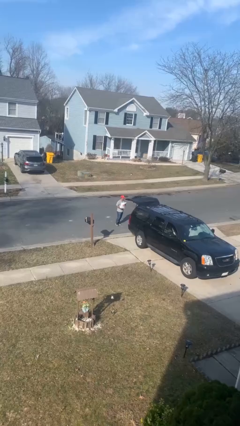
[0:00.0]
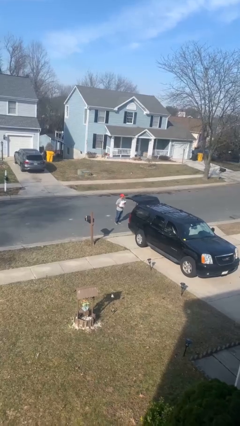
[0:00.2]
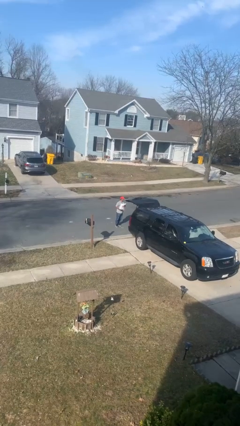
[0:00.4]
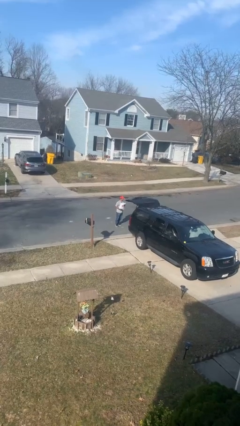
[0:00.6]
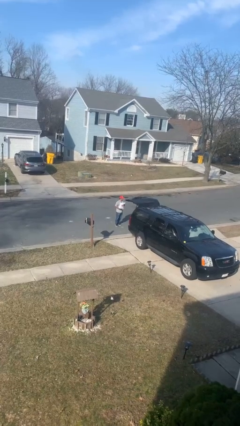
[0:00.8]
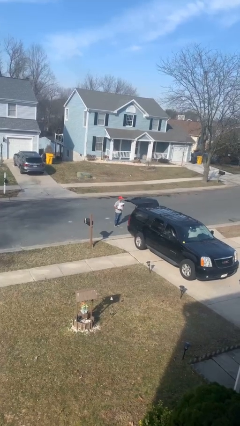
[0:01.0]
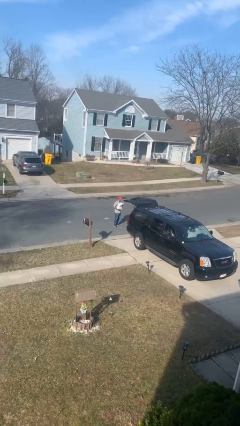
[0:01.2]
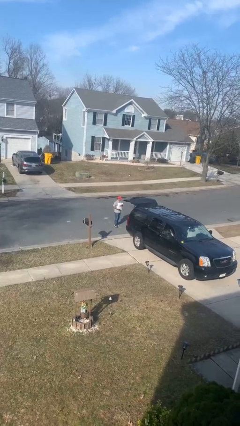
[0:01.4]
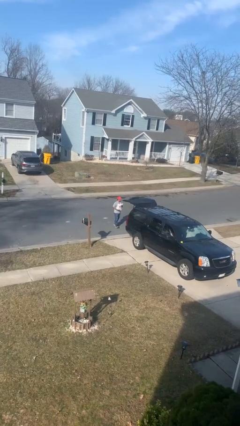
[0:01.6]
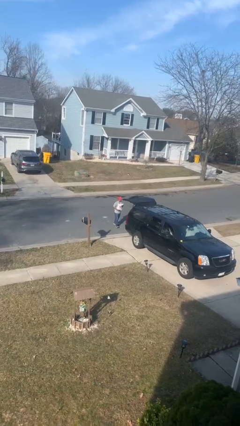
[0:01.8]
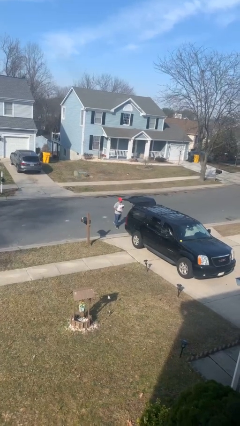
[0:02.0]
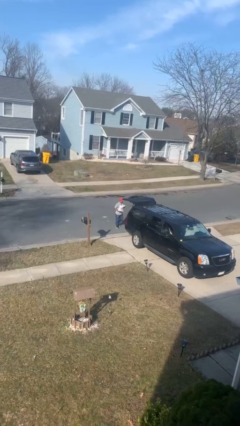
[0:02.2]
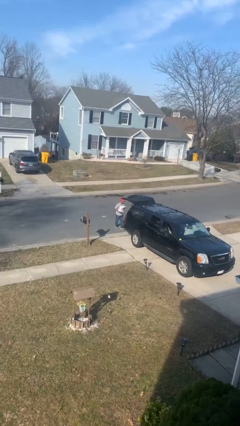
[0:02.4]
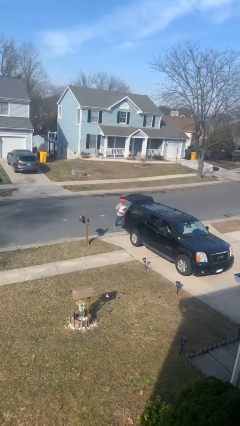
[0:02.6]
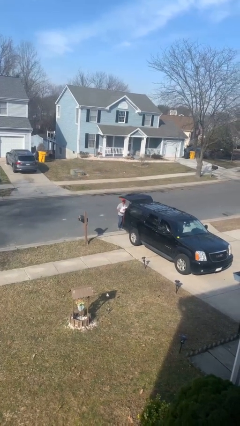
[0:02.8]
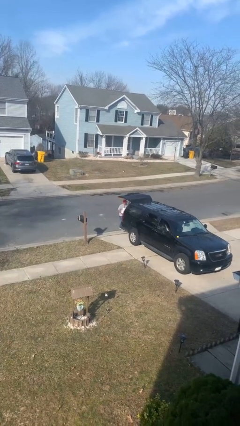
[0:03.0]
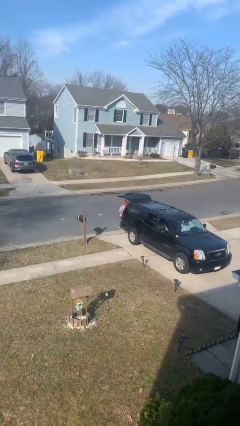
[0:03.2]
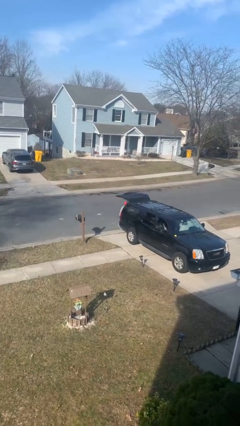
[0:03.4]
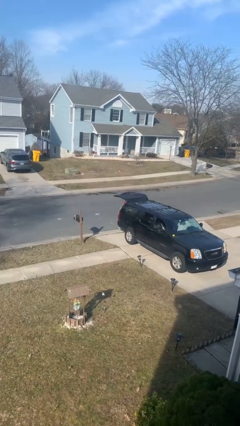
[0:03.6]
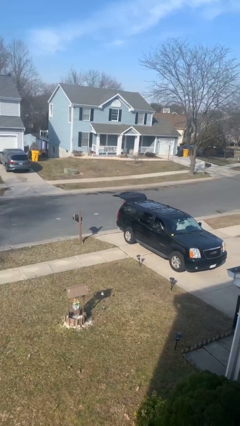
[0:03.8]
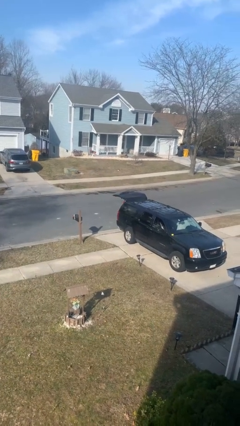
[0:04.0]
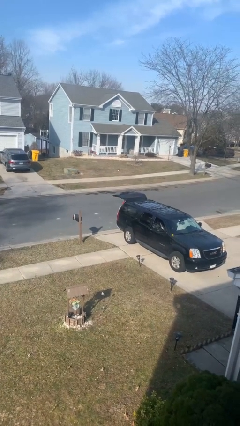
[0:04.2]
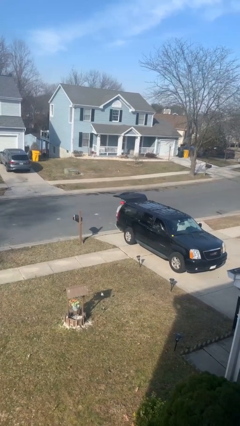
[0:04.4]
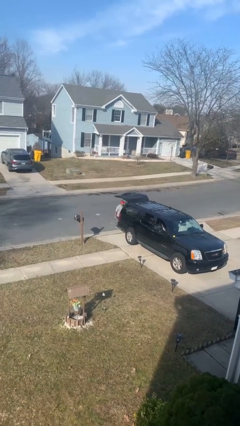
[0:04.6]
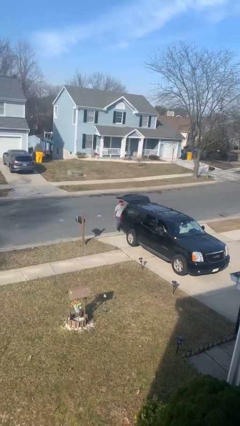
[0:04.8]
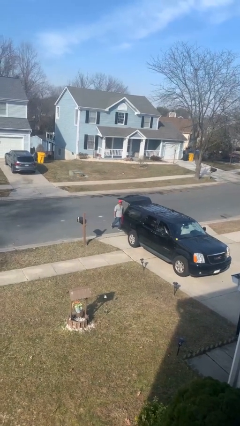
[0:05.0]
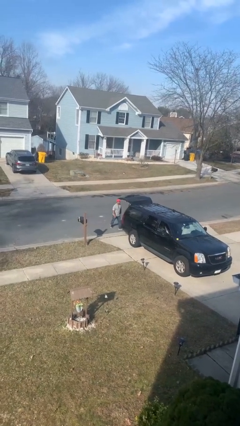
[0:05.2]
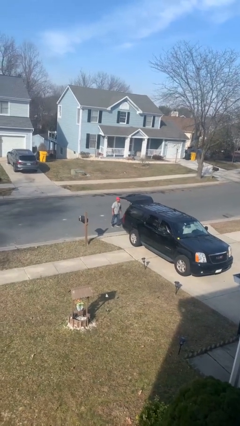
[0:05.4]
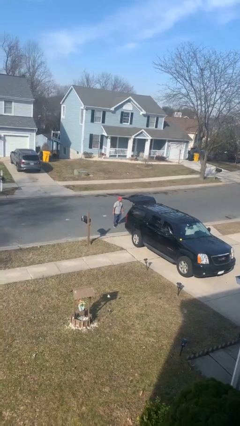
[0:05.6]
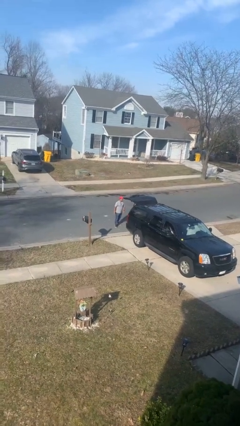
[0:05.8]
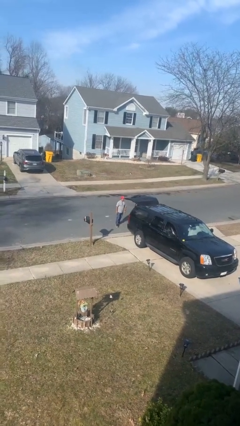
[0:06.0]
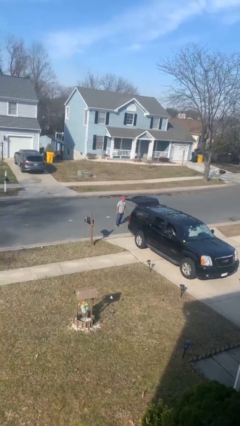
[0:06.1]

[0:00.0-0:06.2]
person loads car

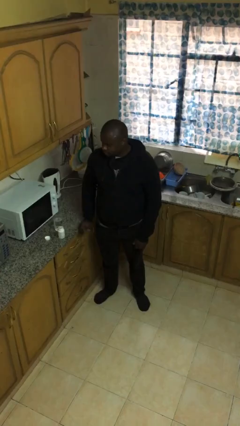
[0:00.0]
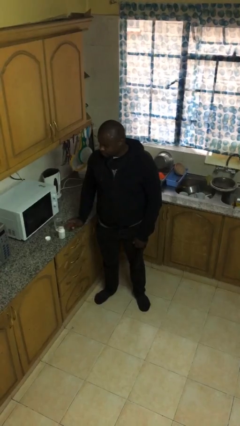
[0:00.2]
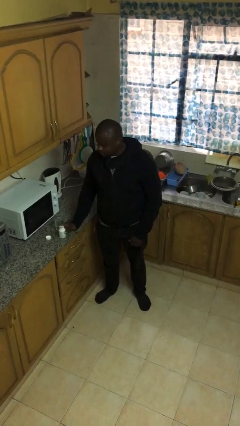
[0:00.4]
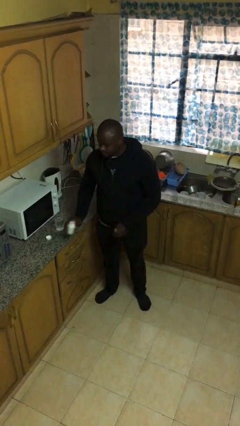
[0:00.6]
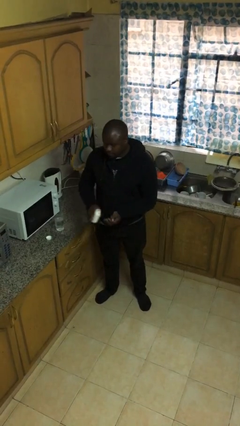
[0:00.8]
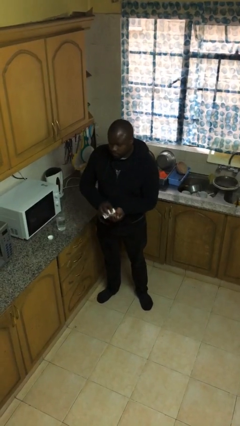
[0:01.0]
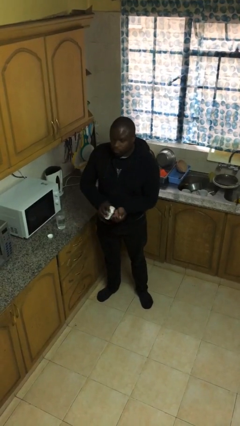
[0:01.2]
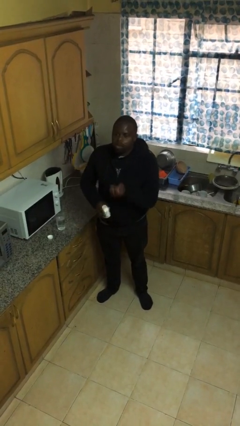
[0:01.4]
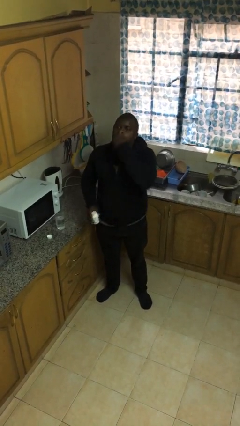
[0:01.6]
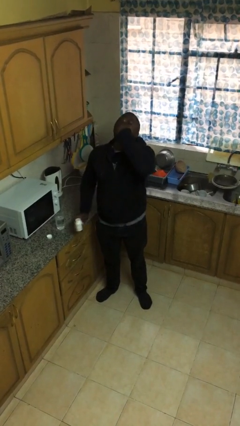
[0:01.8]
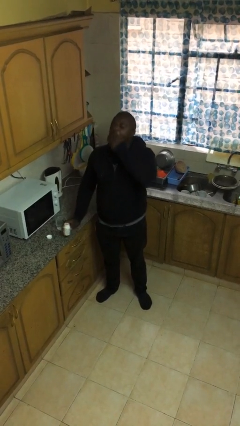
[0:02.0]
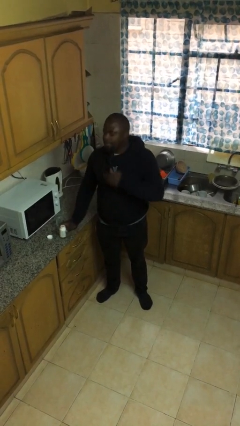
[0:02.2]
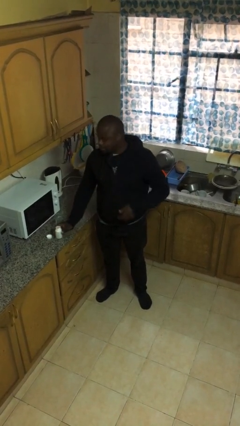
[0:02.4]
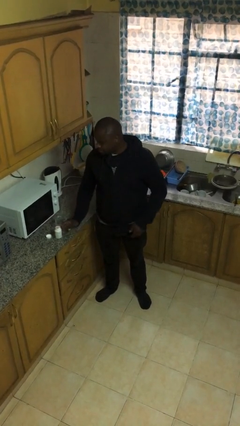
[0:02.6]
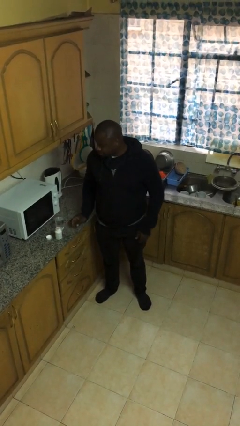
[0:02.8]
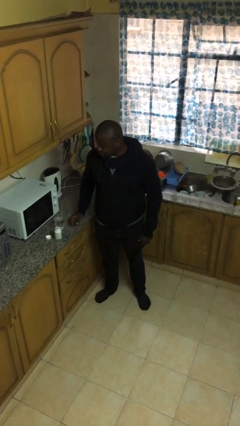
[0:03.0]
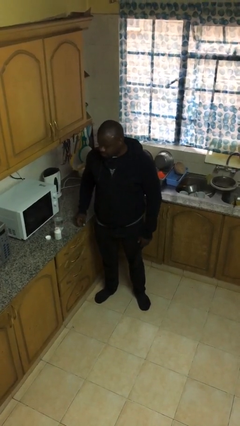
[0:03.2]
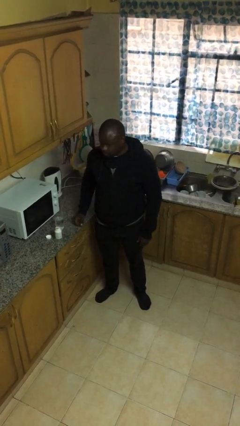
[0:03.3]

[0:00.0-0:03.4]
person takes medicine pills

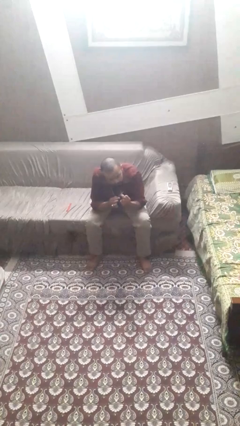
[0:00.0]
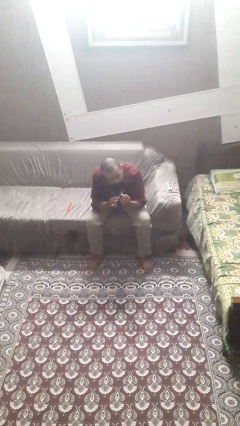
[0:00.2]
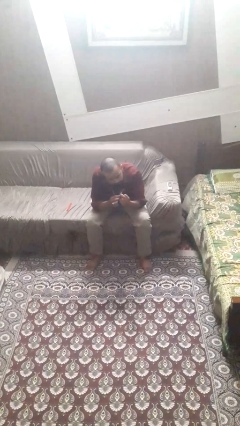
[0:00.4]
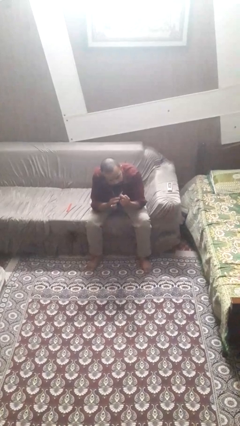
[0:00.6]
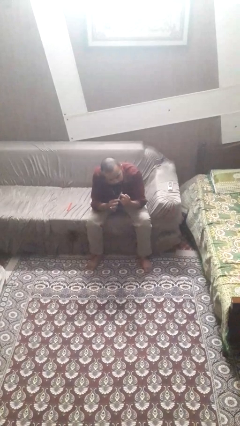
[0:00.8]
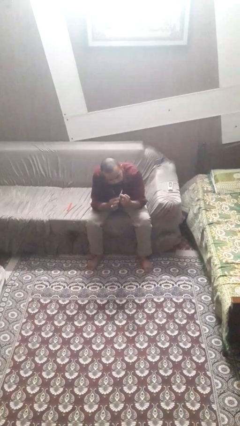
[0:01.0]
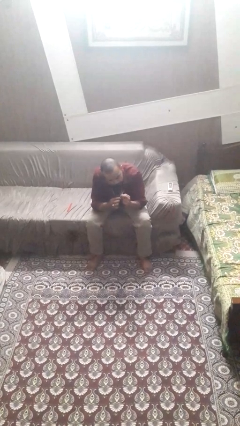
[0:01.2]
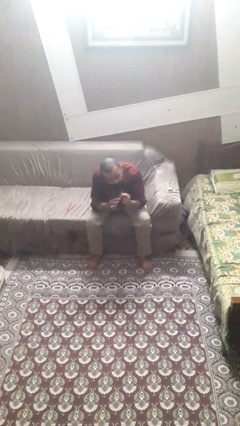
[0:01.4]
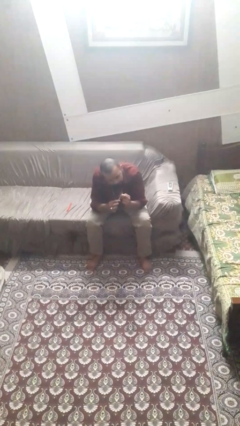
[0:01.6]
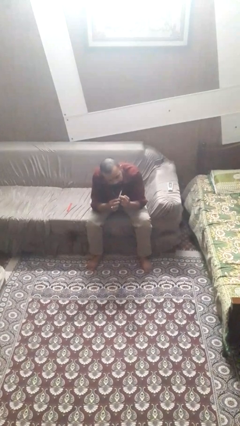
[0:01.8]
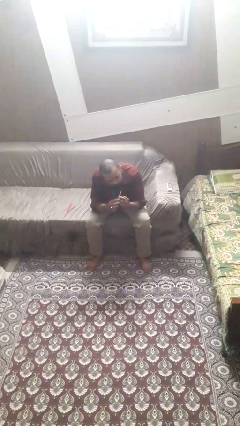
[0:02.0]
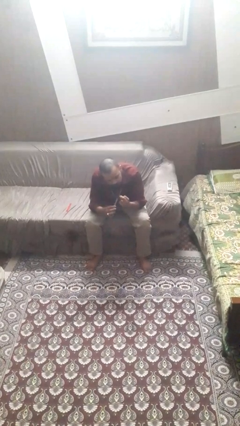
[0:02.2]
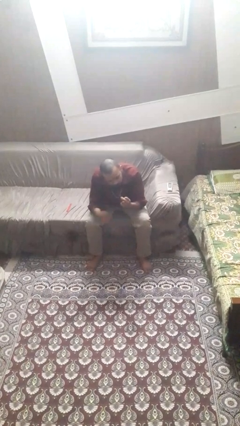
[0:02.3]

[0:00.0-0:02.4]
person files fingernails

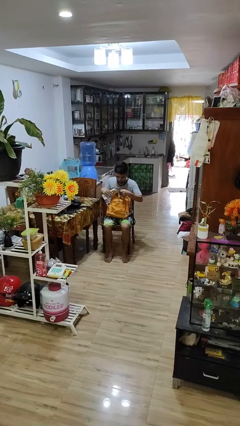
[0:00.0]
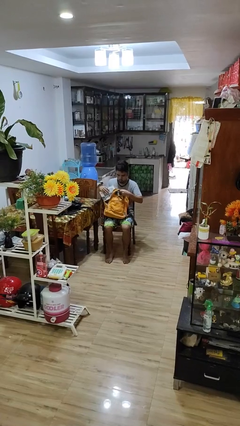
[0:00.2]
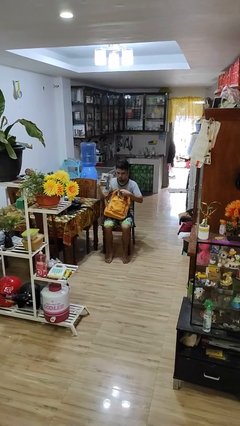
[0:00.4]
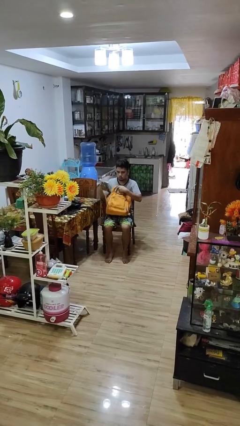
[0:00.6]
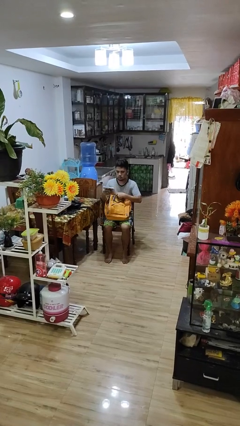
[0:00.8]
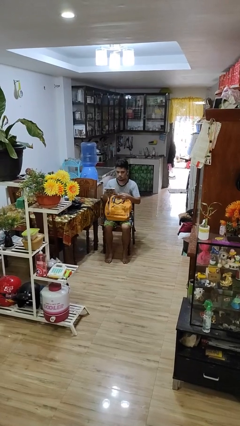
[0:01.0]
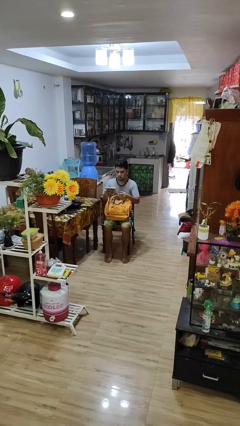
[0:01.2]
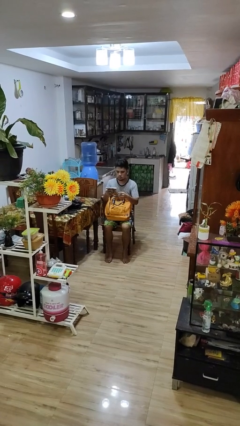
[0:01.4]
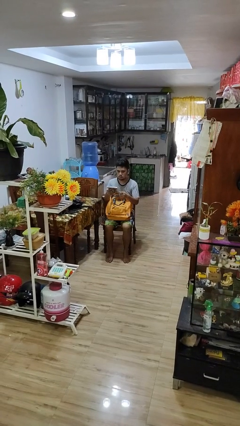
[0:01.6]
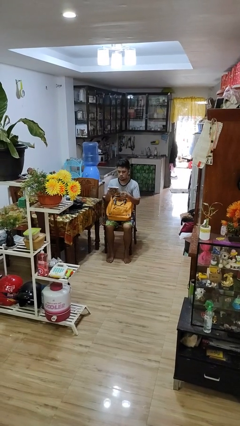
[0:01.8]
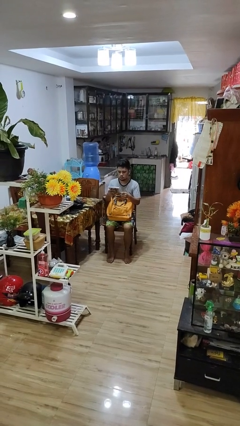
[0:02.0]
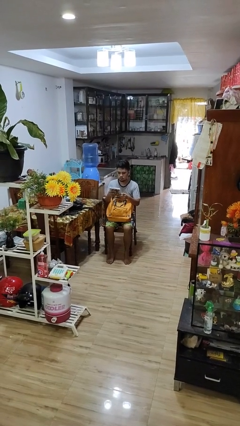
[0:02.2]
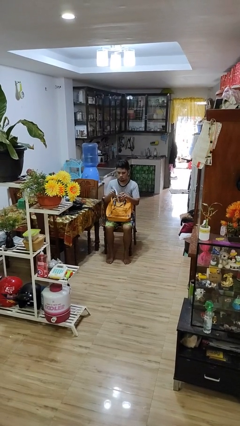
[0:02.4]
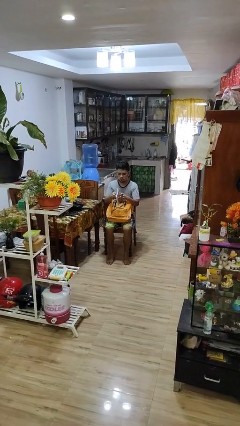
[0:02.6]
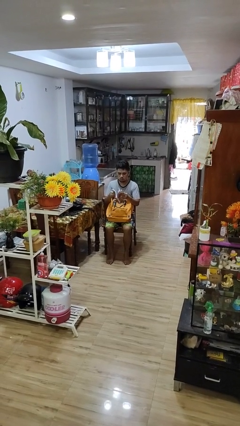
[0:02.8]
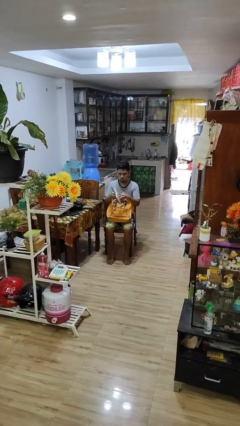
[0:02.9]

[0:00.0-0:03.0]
person takes object from backpack

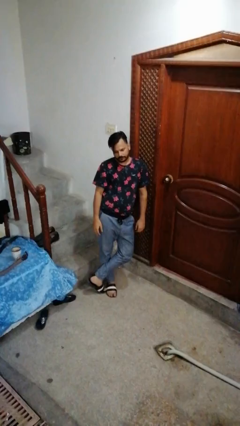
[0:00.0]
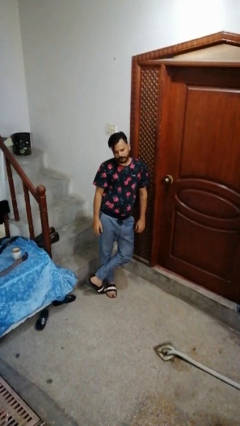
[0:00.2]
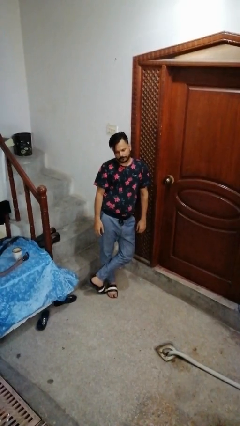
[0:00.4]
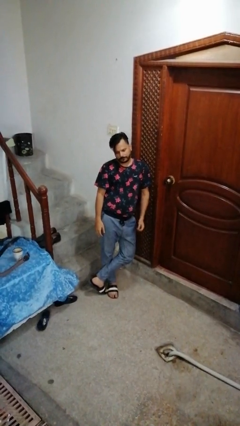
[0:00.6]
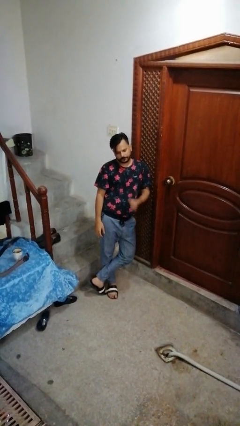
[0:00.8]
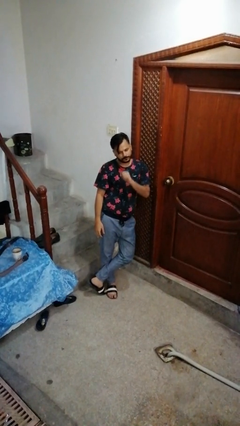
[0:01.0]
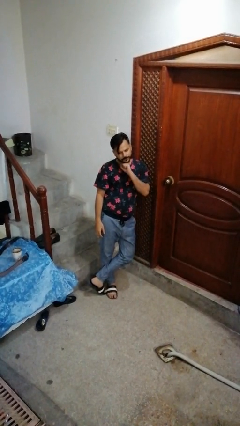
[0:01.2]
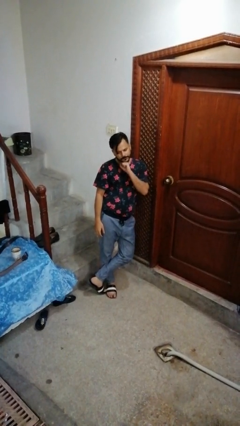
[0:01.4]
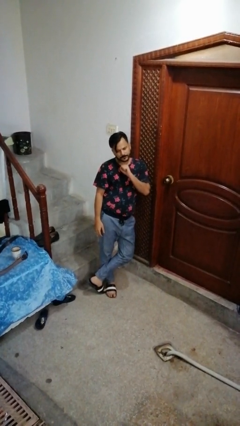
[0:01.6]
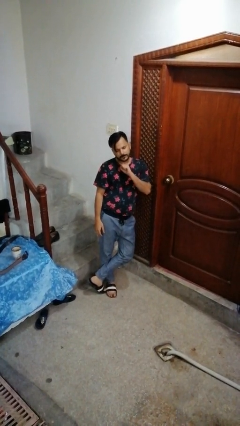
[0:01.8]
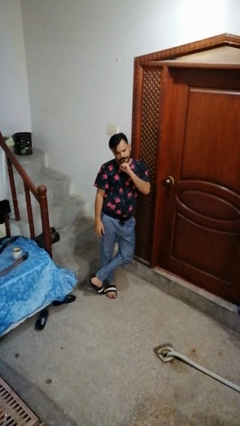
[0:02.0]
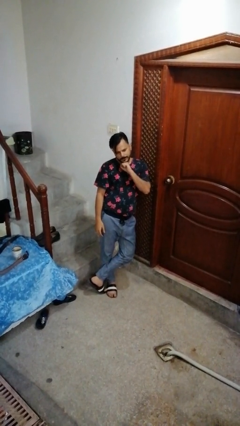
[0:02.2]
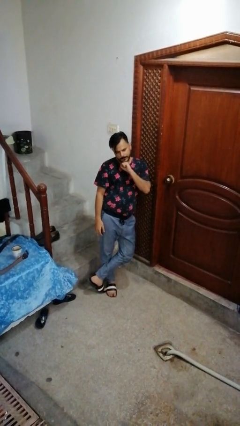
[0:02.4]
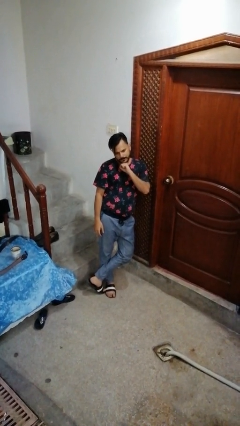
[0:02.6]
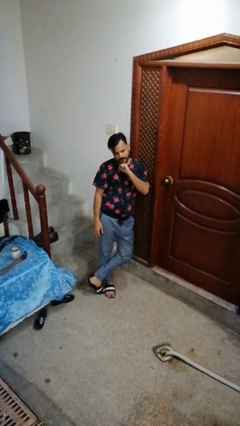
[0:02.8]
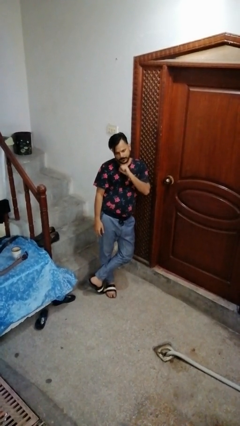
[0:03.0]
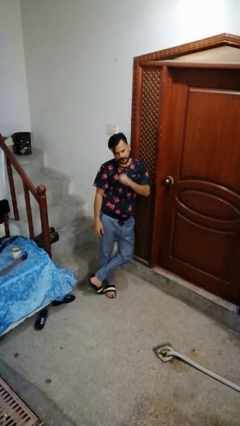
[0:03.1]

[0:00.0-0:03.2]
person strokes chin
